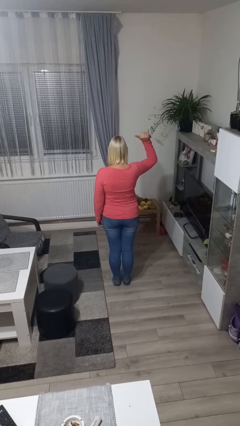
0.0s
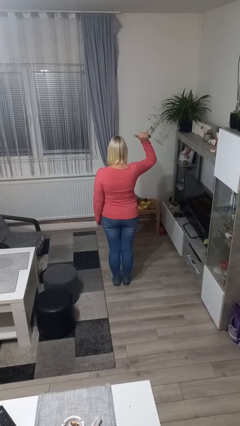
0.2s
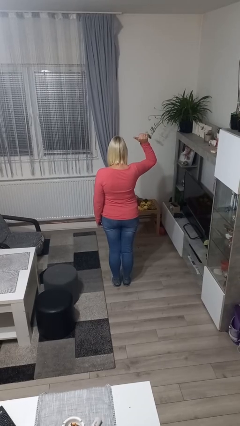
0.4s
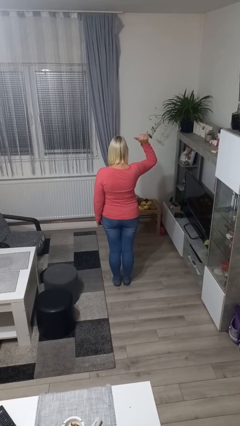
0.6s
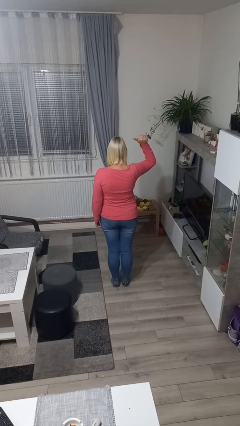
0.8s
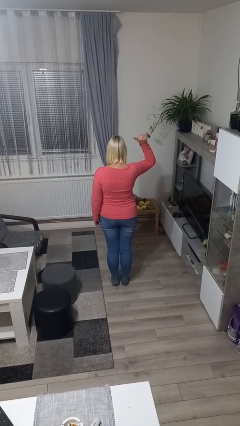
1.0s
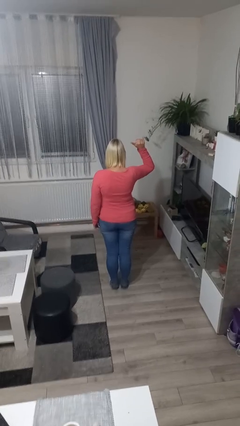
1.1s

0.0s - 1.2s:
person gestures hang loose

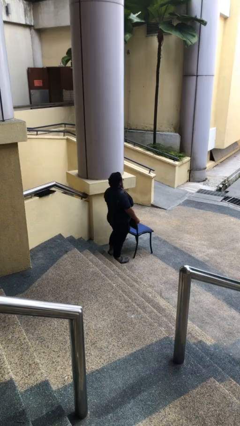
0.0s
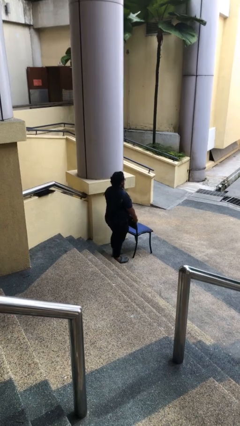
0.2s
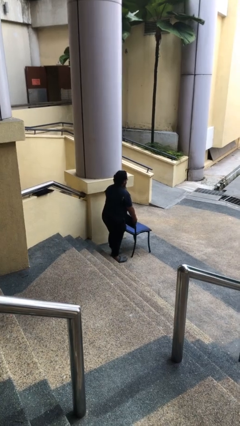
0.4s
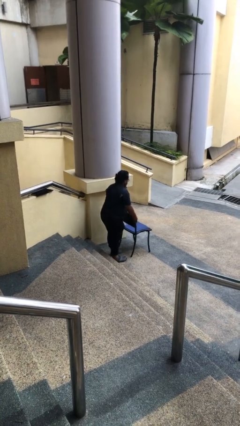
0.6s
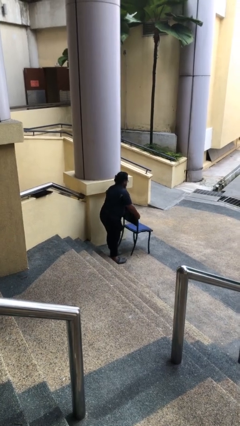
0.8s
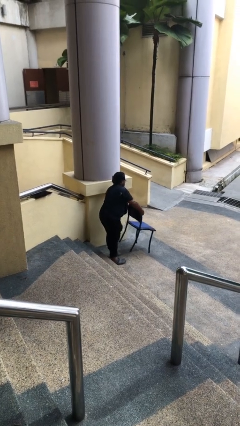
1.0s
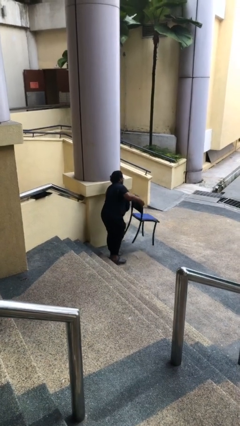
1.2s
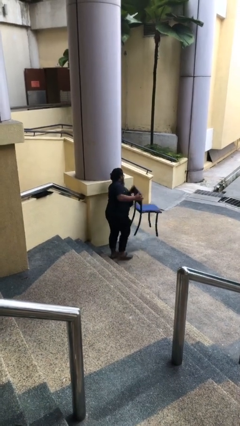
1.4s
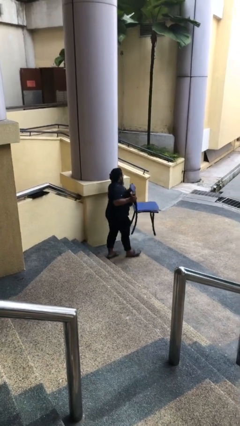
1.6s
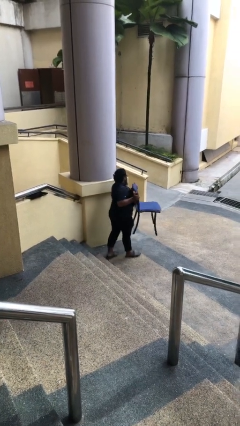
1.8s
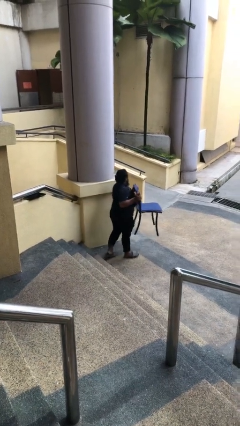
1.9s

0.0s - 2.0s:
person picks up object from floor

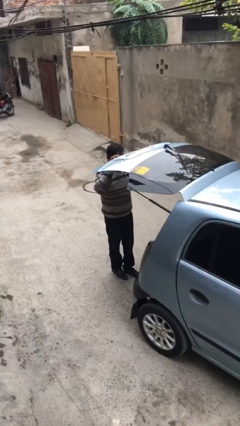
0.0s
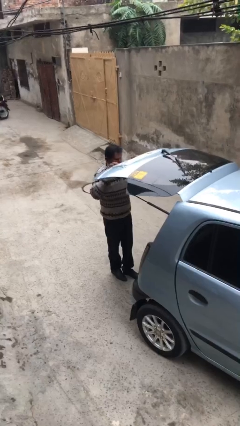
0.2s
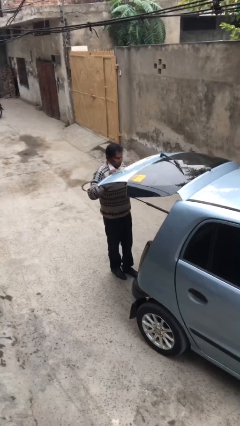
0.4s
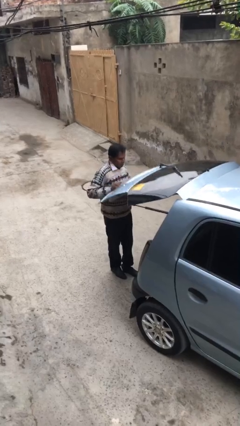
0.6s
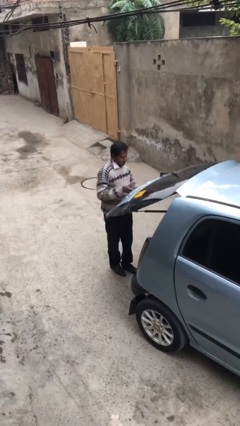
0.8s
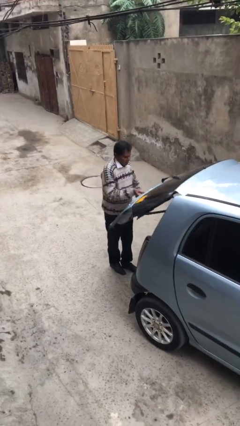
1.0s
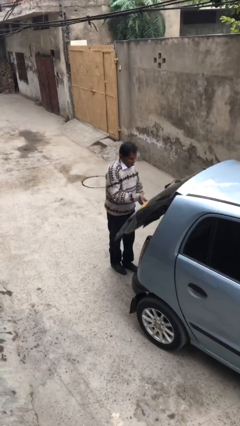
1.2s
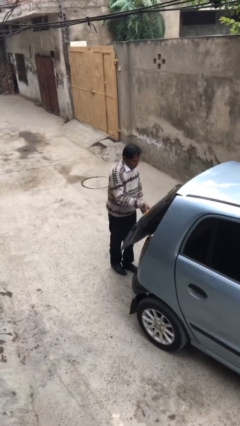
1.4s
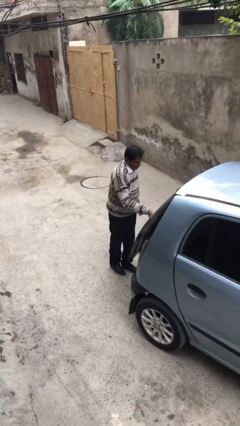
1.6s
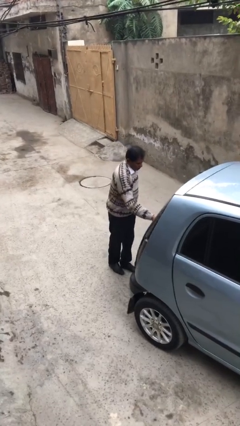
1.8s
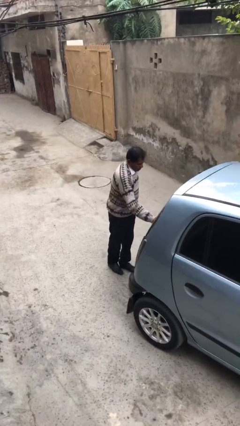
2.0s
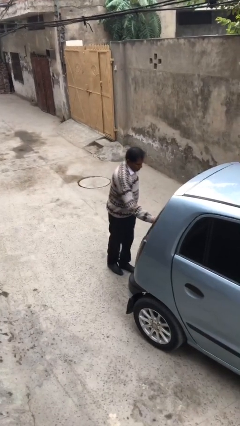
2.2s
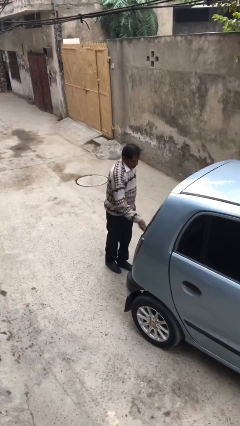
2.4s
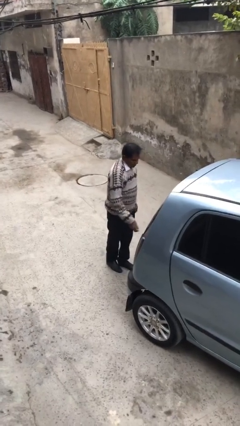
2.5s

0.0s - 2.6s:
person closes car trunk

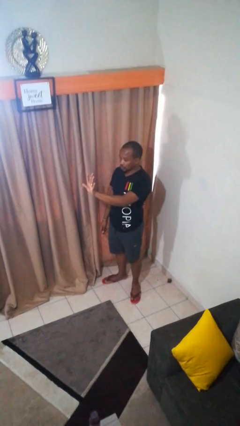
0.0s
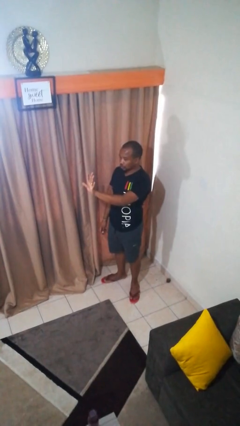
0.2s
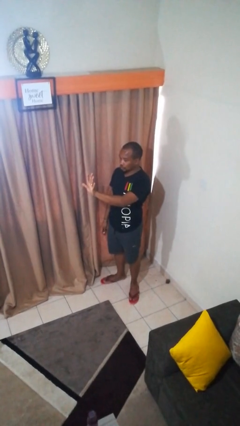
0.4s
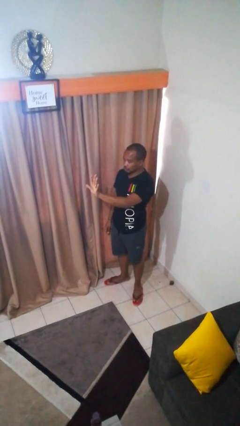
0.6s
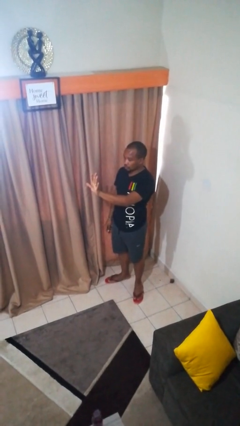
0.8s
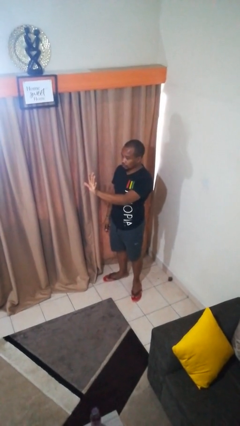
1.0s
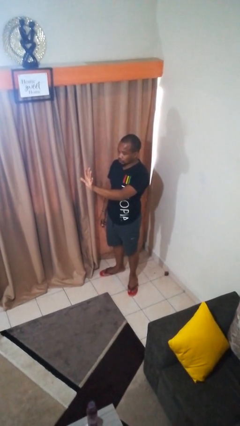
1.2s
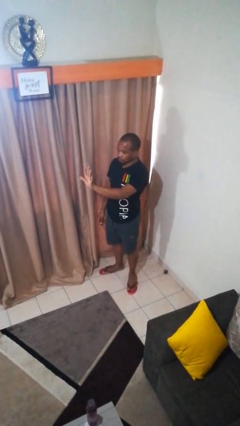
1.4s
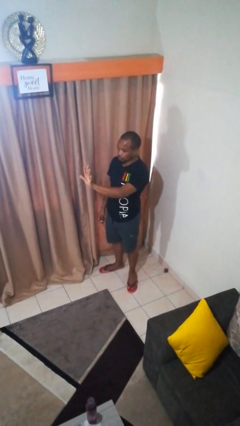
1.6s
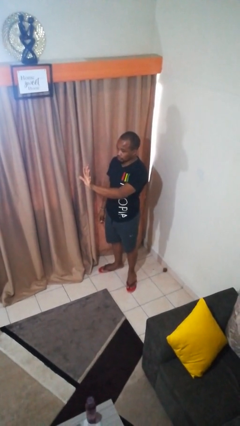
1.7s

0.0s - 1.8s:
person gestures number five

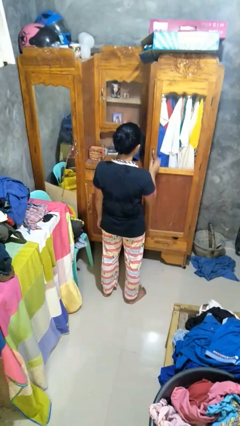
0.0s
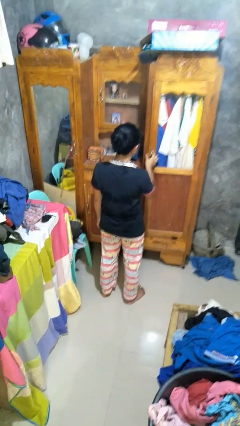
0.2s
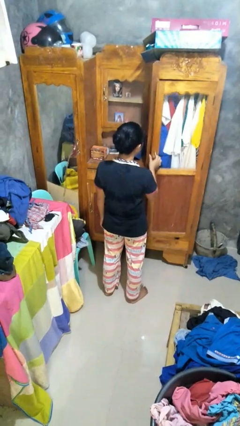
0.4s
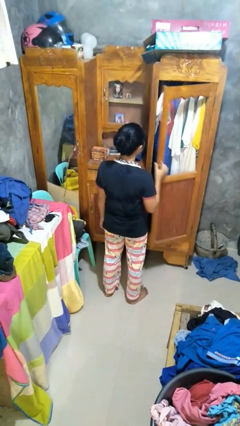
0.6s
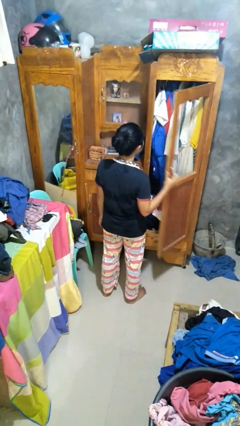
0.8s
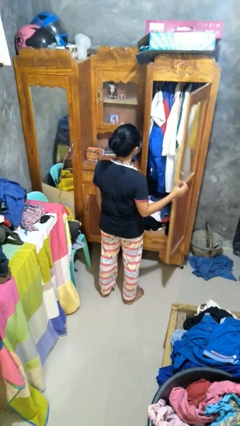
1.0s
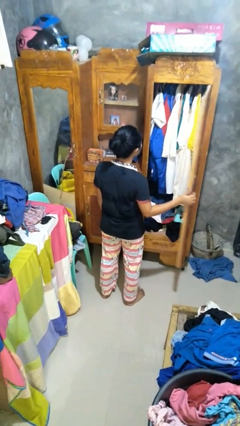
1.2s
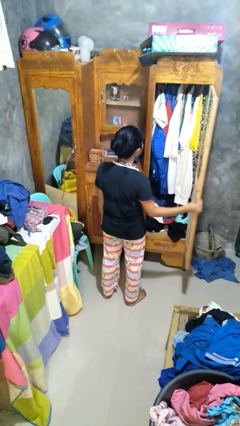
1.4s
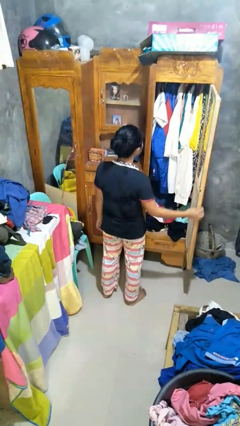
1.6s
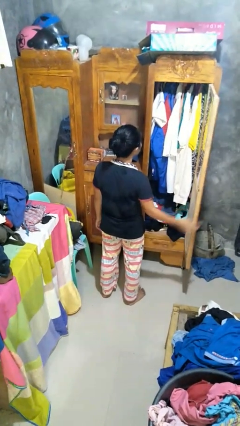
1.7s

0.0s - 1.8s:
person opens closet door

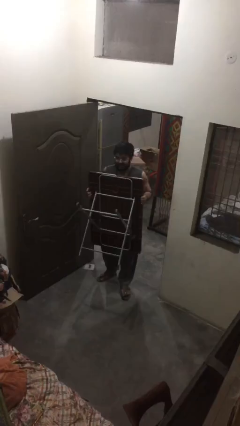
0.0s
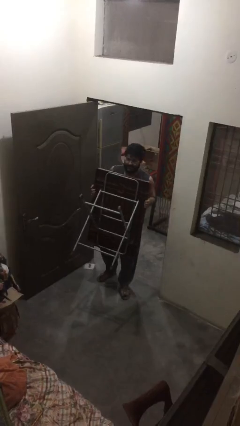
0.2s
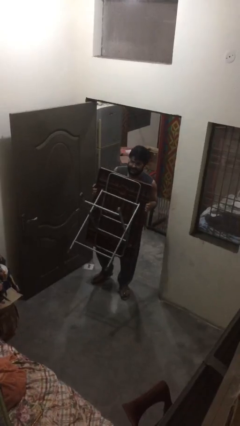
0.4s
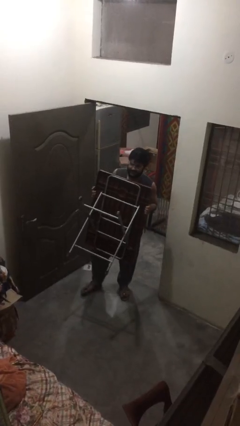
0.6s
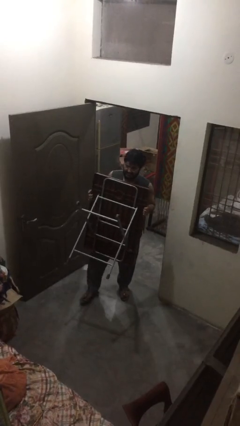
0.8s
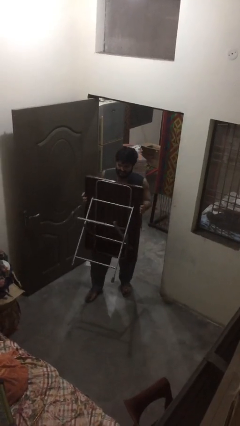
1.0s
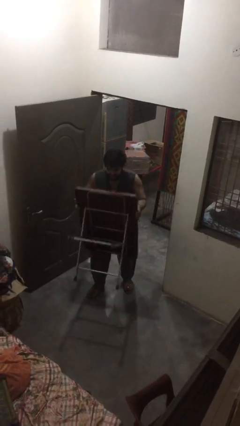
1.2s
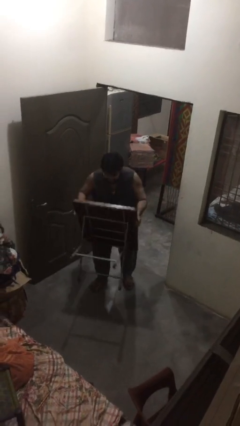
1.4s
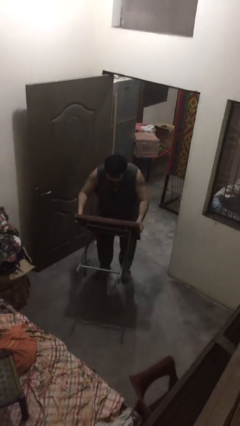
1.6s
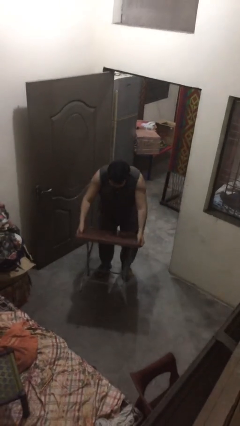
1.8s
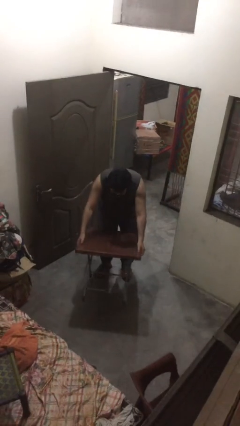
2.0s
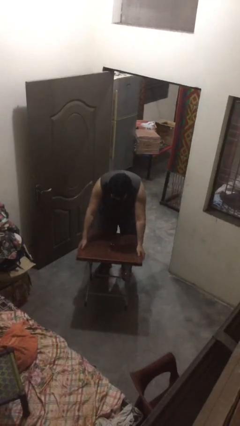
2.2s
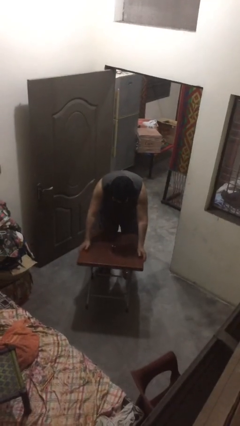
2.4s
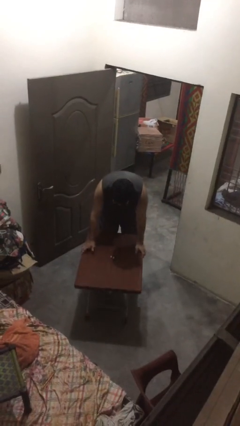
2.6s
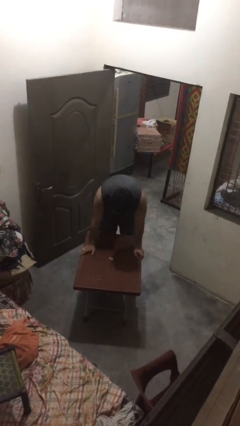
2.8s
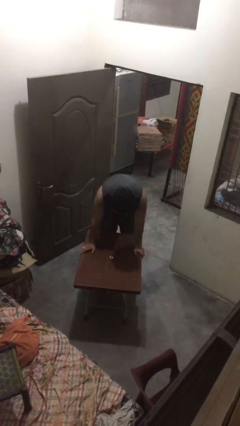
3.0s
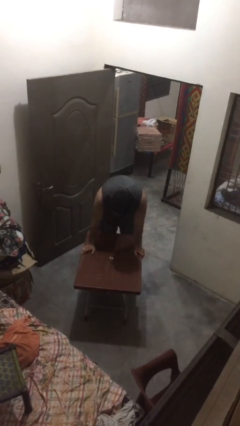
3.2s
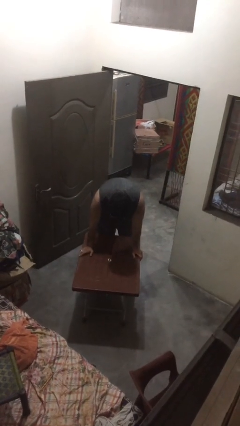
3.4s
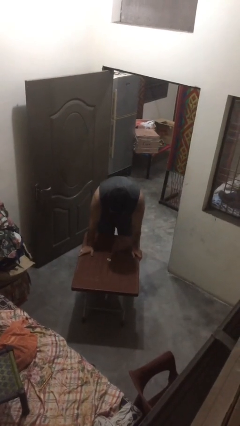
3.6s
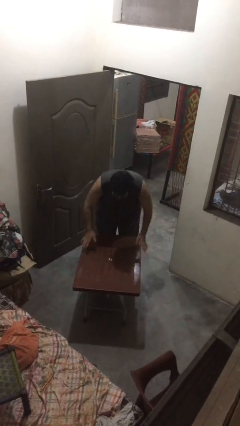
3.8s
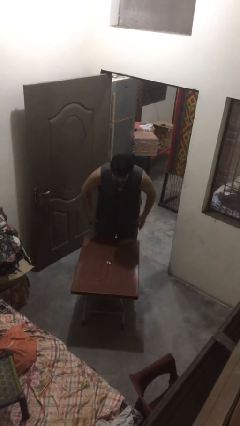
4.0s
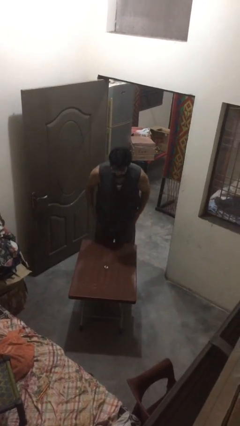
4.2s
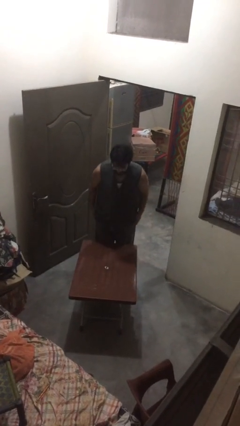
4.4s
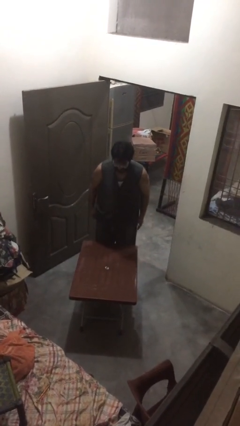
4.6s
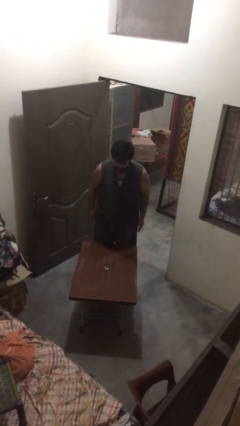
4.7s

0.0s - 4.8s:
person puts down object on floor

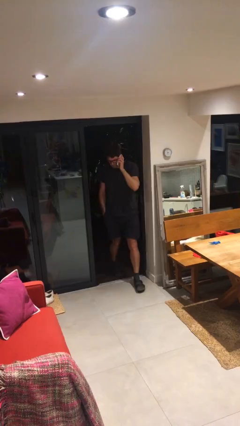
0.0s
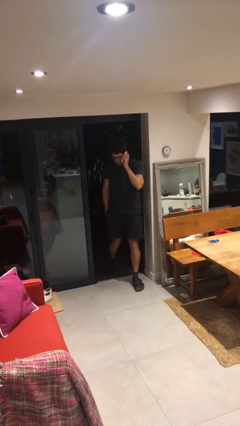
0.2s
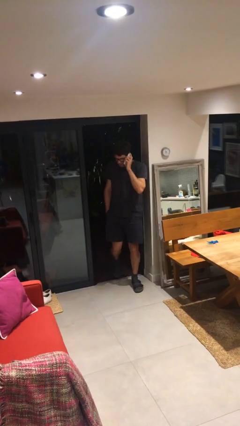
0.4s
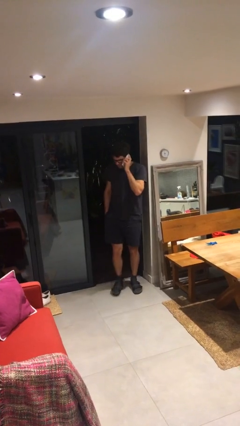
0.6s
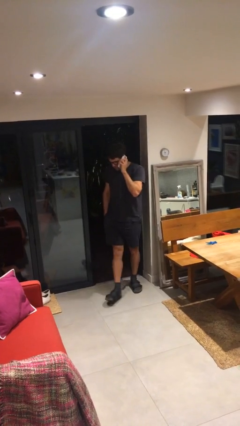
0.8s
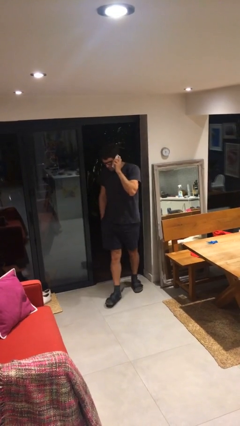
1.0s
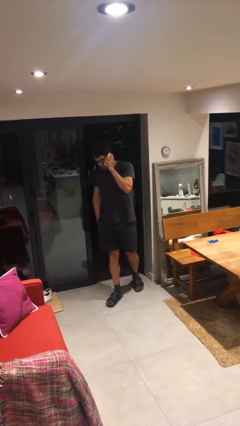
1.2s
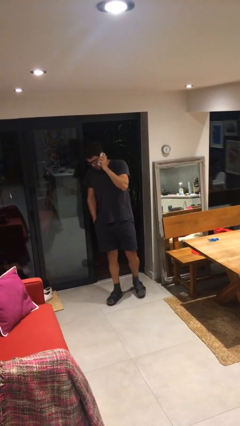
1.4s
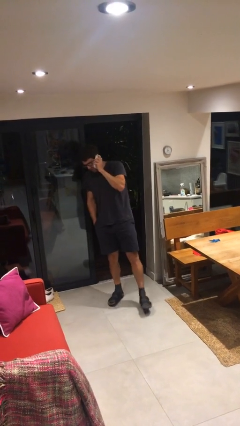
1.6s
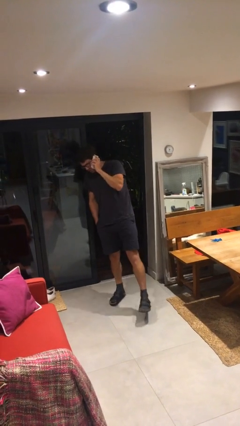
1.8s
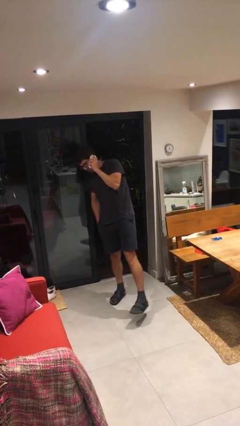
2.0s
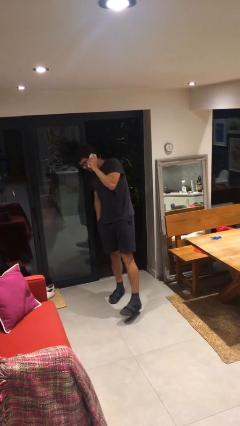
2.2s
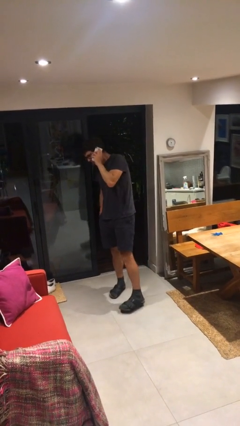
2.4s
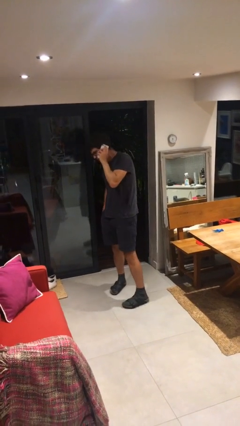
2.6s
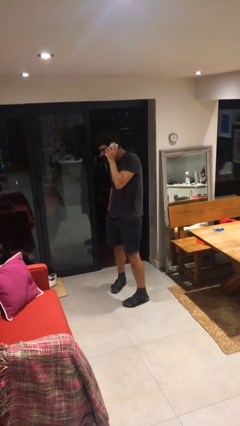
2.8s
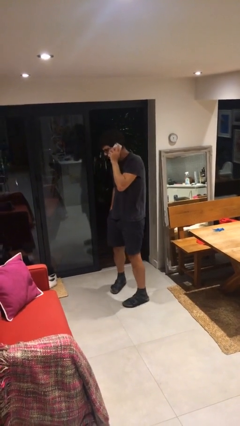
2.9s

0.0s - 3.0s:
person enters scene through structure
